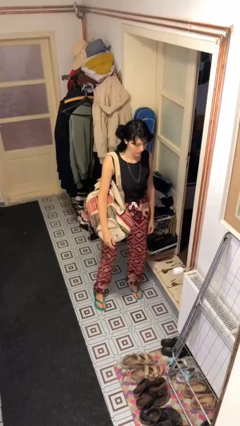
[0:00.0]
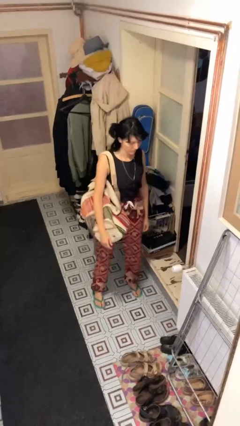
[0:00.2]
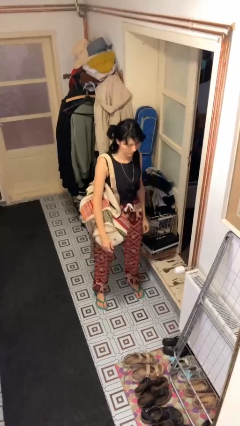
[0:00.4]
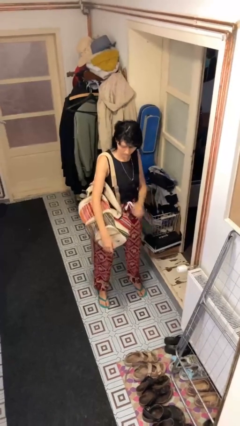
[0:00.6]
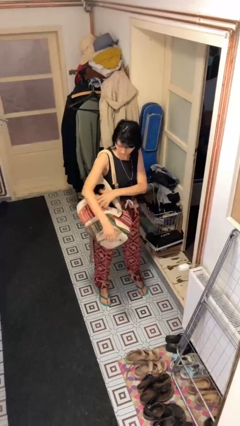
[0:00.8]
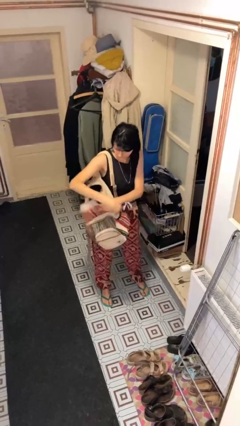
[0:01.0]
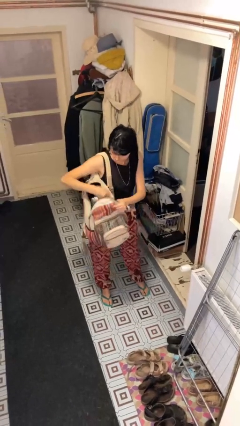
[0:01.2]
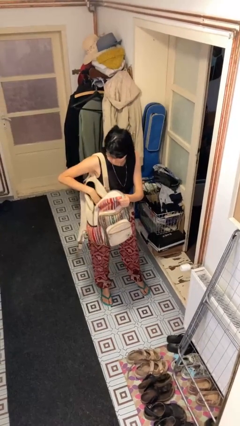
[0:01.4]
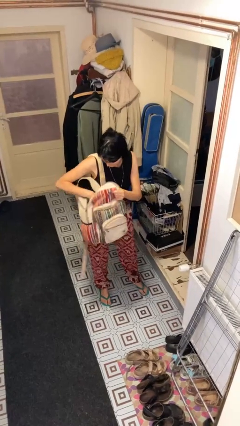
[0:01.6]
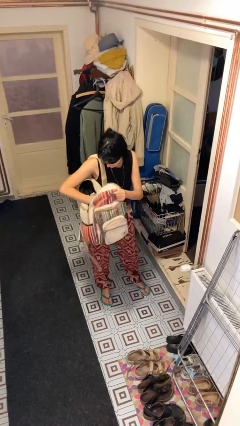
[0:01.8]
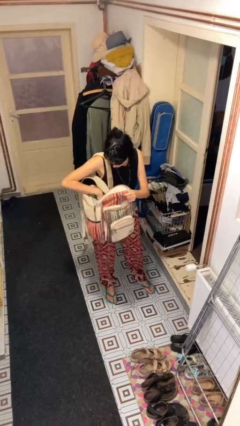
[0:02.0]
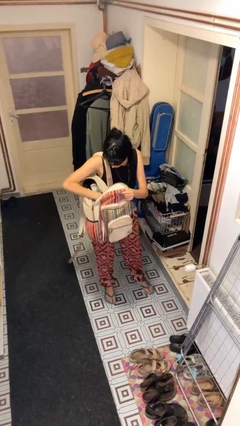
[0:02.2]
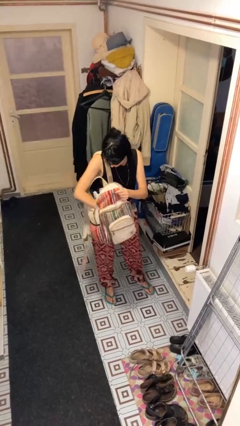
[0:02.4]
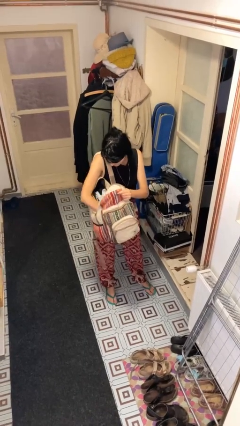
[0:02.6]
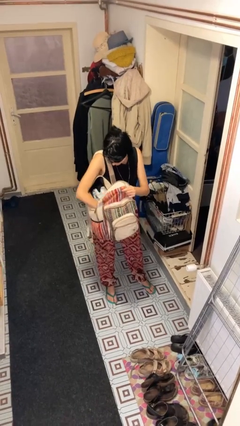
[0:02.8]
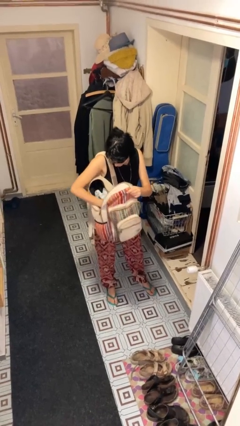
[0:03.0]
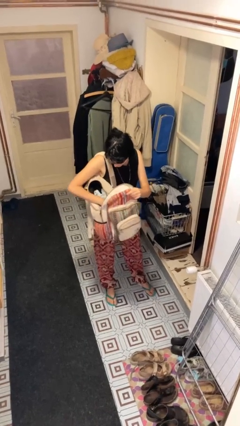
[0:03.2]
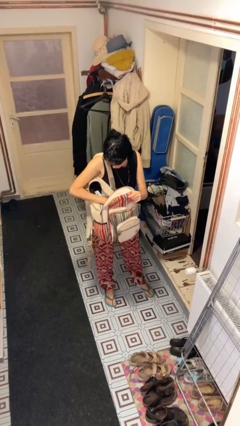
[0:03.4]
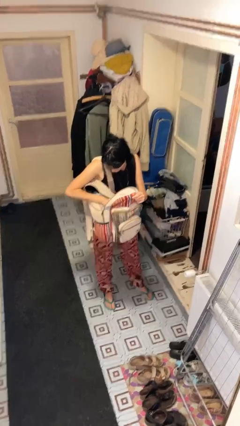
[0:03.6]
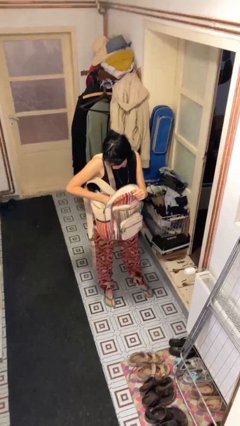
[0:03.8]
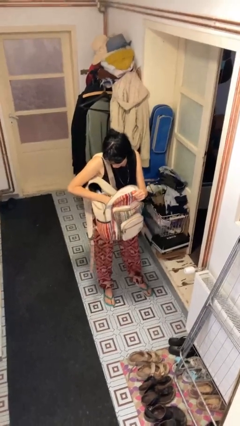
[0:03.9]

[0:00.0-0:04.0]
person searches in backpack

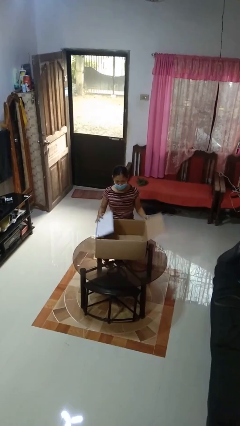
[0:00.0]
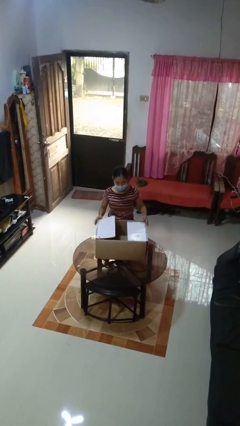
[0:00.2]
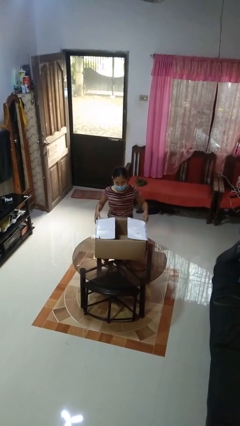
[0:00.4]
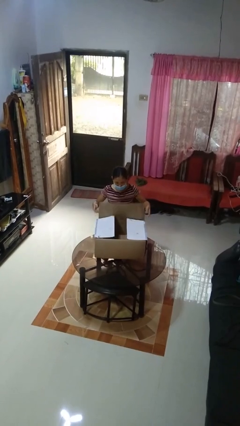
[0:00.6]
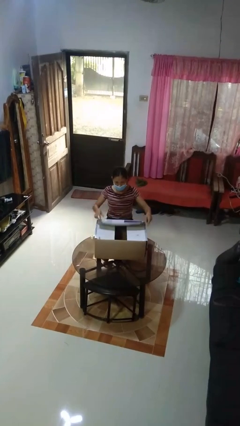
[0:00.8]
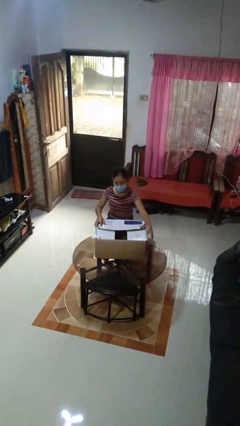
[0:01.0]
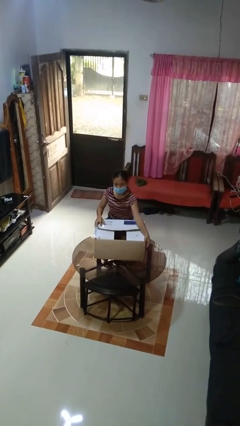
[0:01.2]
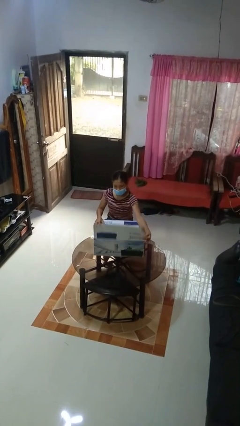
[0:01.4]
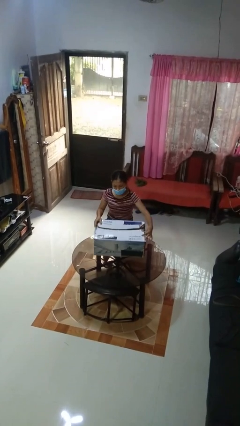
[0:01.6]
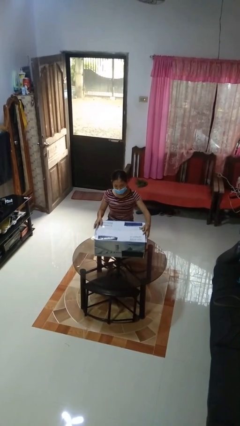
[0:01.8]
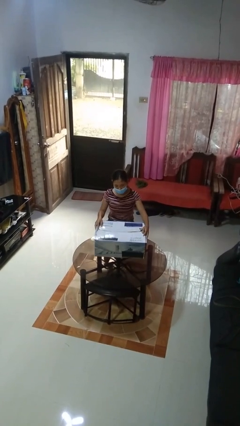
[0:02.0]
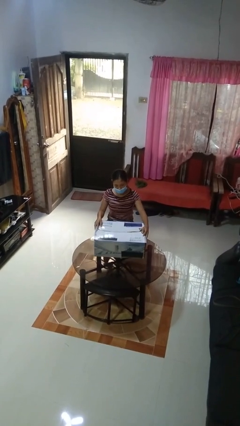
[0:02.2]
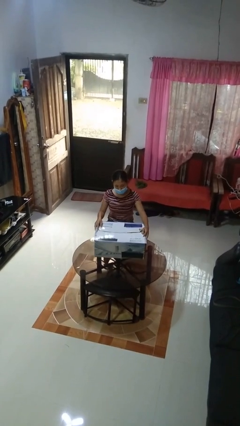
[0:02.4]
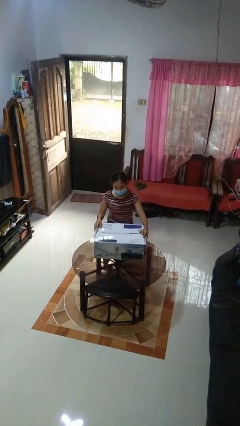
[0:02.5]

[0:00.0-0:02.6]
person closes box

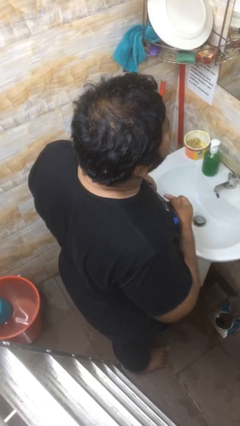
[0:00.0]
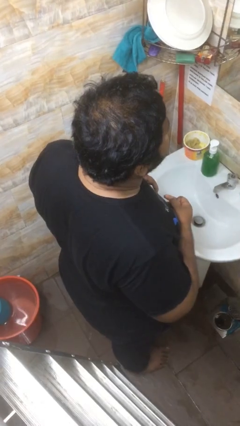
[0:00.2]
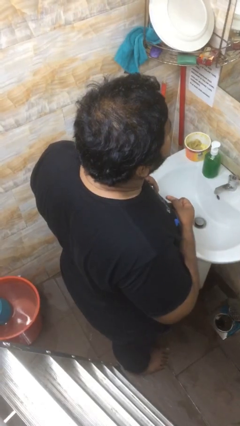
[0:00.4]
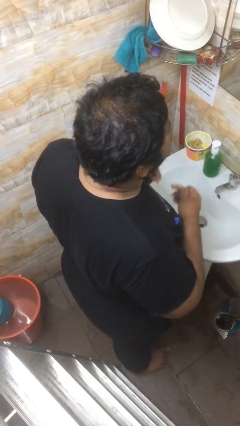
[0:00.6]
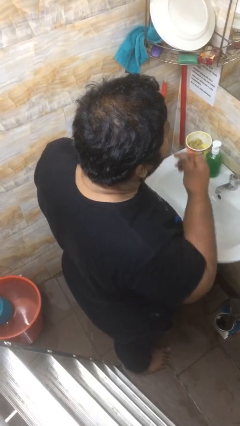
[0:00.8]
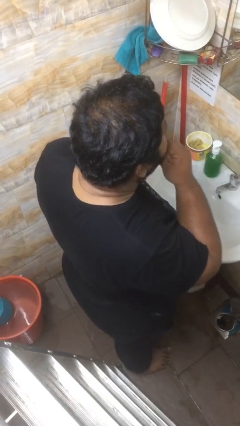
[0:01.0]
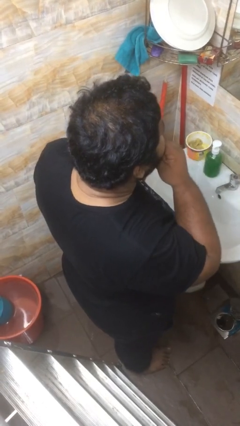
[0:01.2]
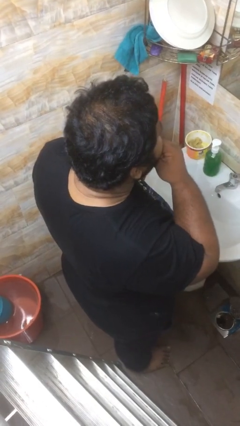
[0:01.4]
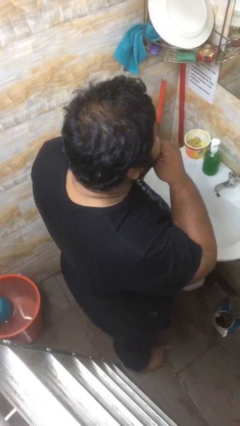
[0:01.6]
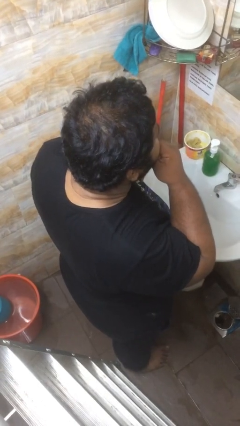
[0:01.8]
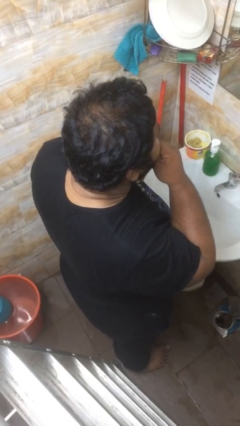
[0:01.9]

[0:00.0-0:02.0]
person flosses

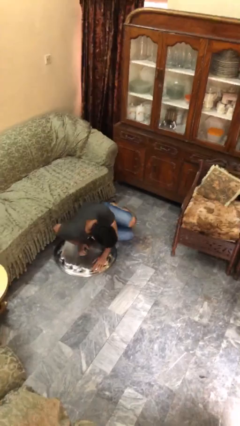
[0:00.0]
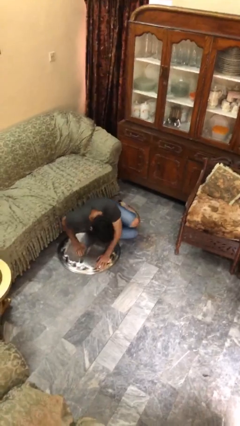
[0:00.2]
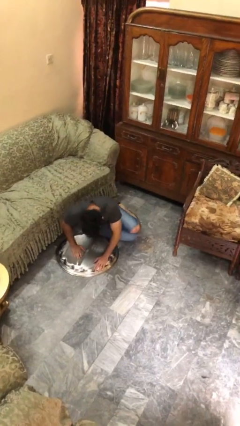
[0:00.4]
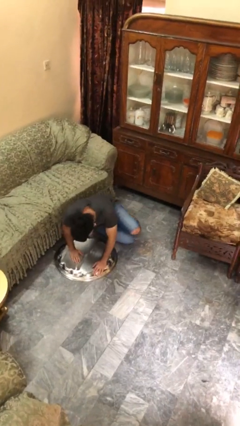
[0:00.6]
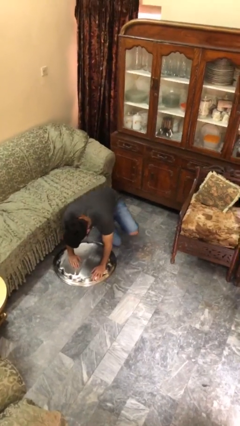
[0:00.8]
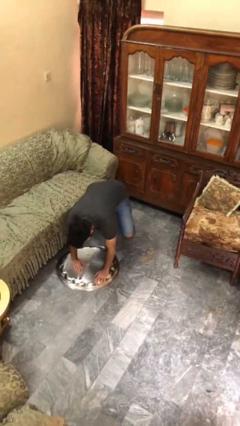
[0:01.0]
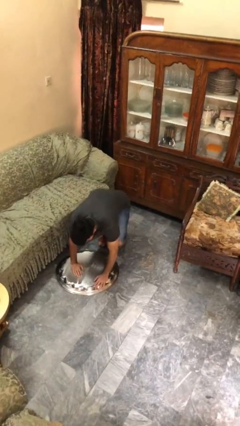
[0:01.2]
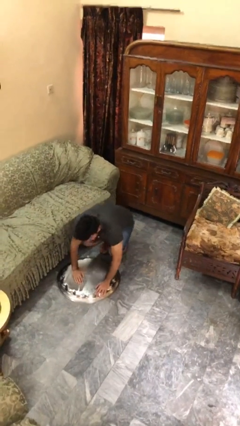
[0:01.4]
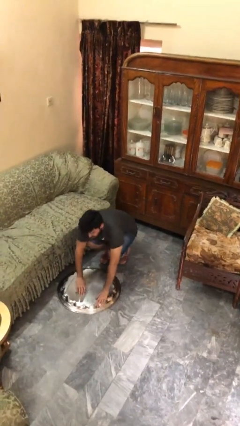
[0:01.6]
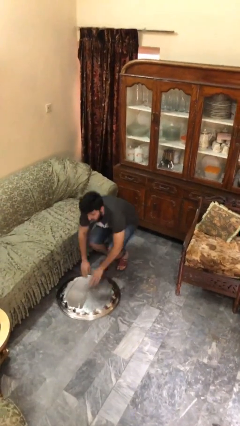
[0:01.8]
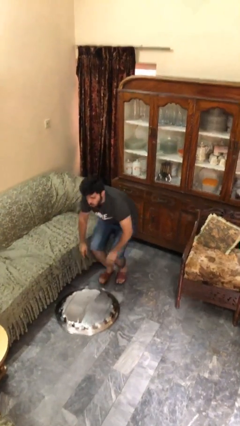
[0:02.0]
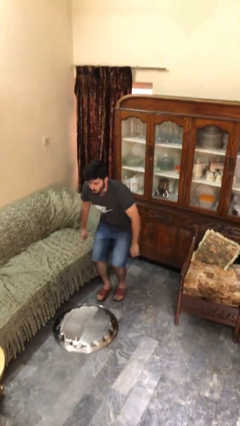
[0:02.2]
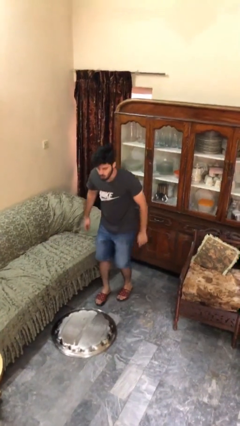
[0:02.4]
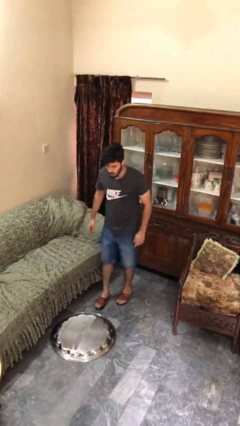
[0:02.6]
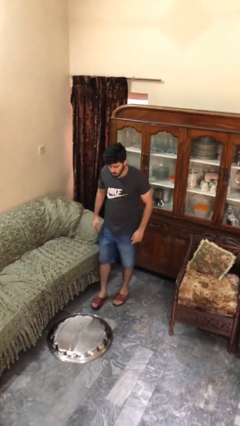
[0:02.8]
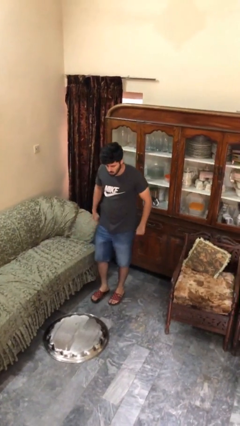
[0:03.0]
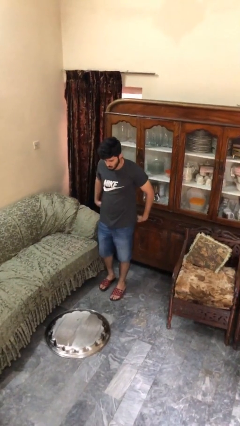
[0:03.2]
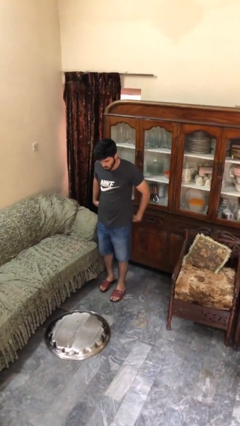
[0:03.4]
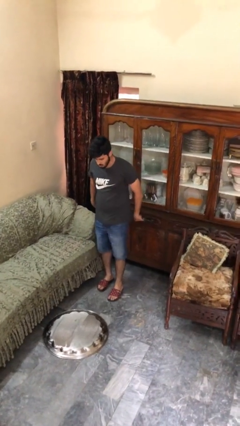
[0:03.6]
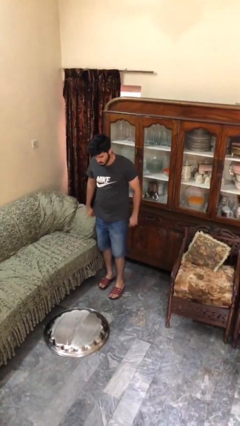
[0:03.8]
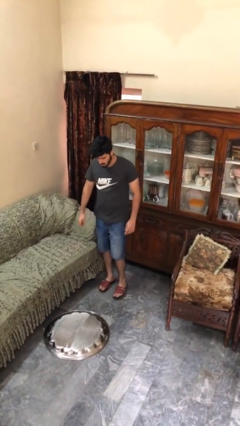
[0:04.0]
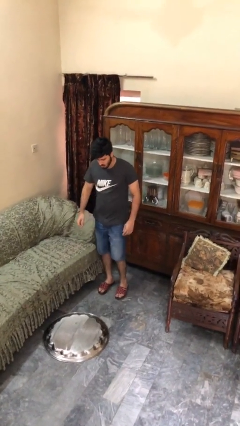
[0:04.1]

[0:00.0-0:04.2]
person stands up from floor

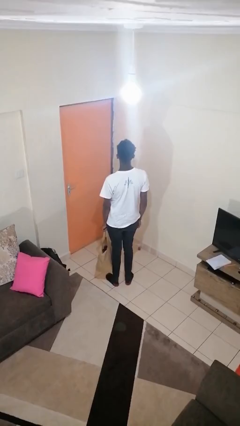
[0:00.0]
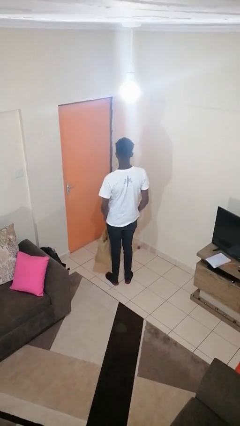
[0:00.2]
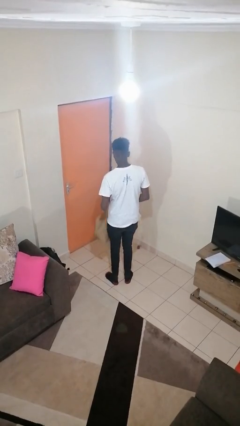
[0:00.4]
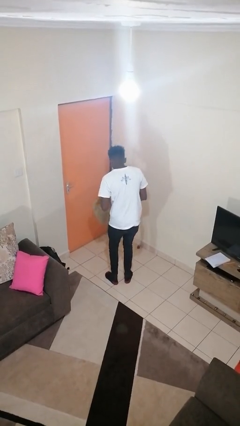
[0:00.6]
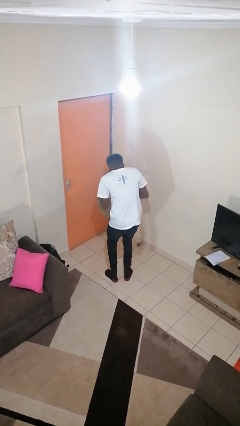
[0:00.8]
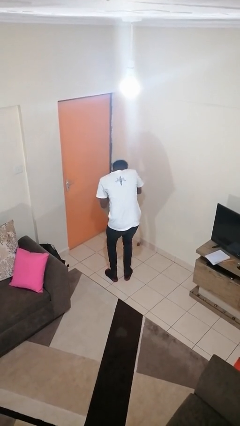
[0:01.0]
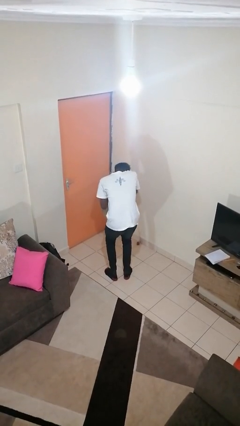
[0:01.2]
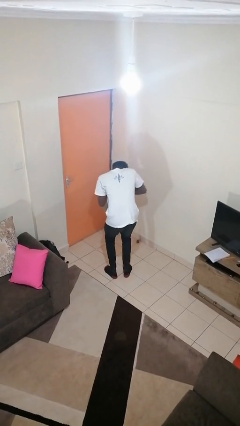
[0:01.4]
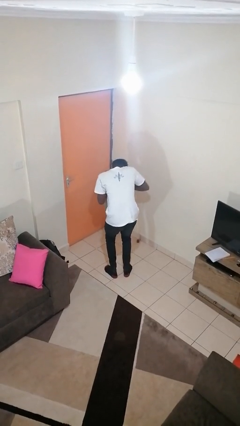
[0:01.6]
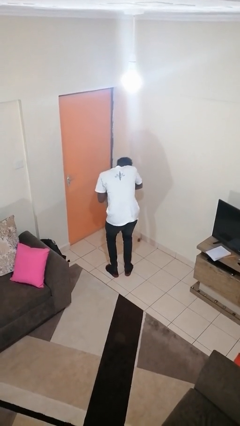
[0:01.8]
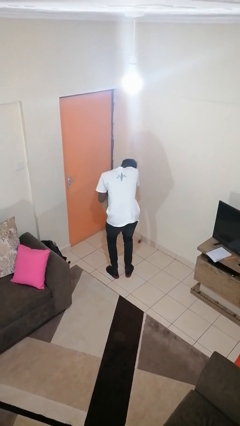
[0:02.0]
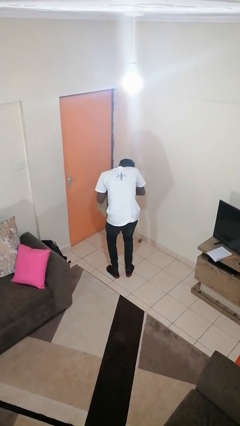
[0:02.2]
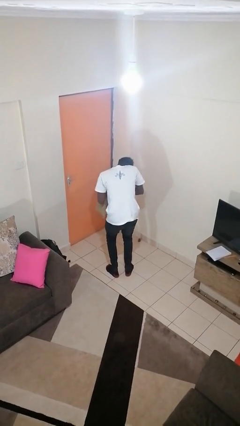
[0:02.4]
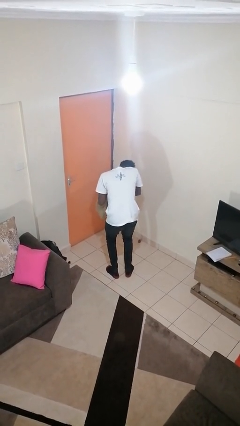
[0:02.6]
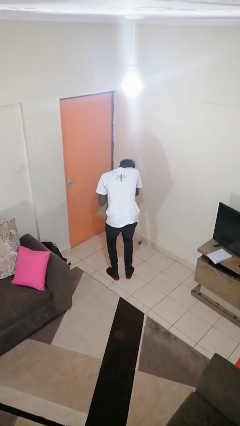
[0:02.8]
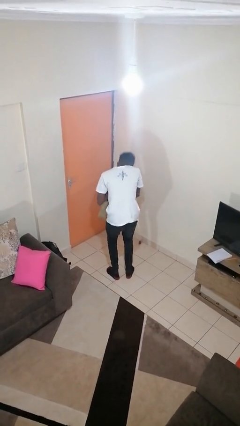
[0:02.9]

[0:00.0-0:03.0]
person searches in bag

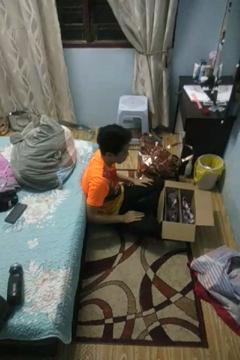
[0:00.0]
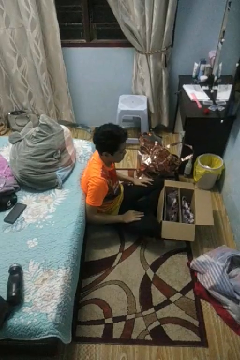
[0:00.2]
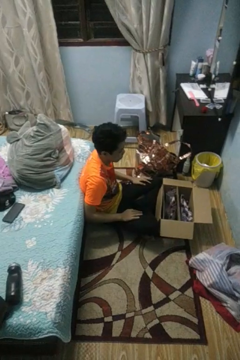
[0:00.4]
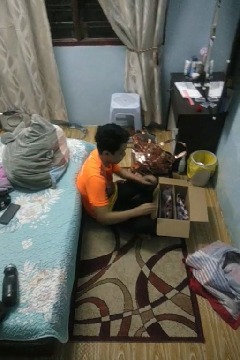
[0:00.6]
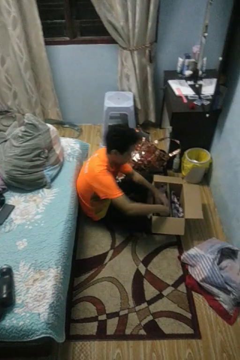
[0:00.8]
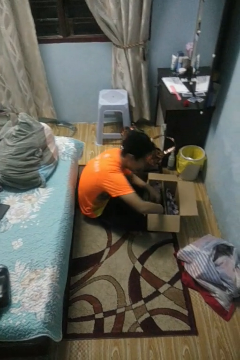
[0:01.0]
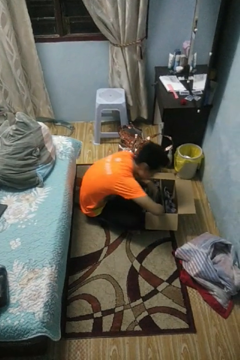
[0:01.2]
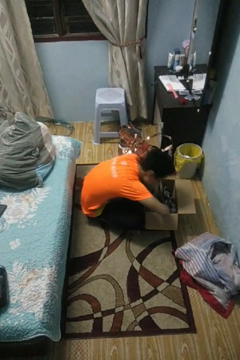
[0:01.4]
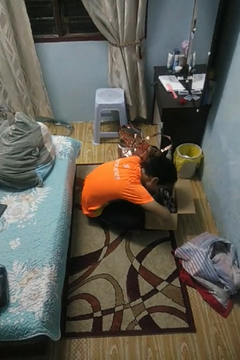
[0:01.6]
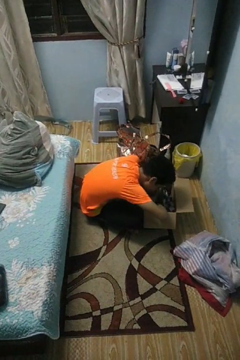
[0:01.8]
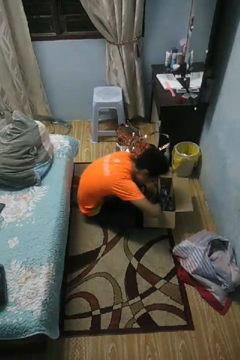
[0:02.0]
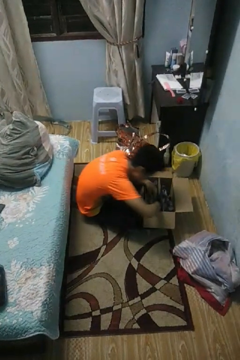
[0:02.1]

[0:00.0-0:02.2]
person searches in box
